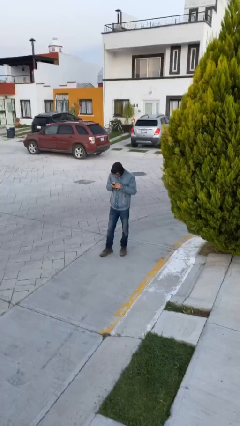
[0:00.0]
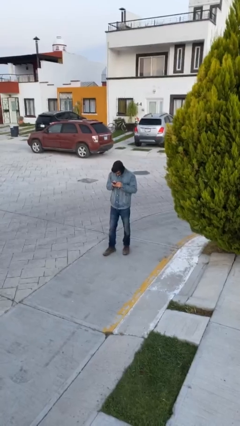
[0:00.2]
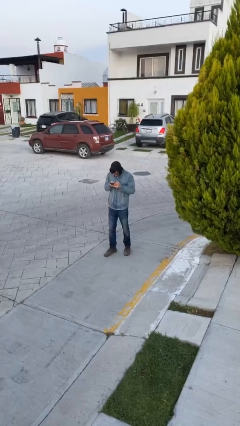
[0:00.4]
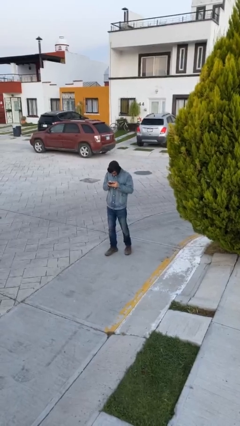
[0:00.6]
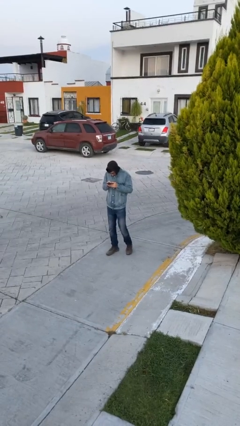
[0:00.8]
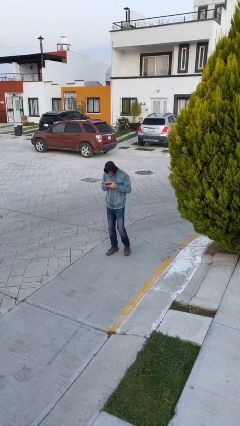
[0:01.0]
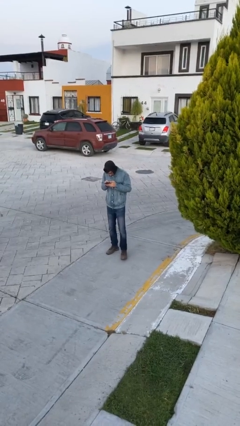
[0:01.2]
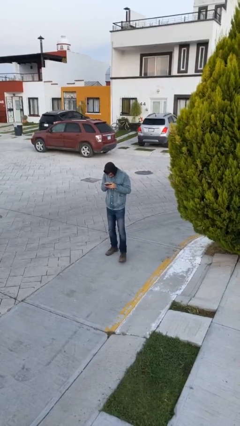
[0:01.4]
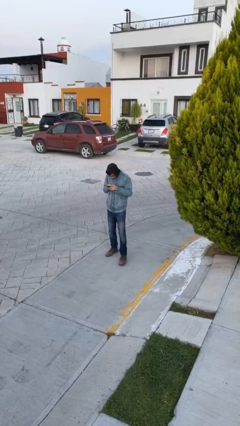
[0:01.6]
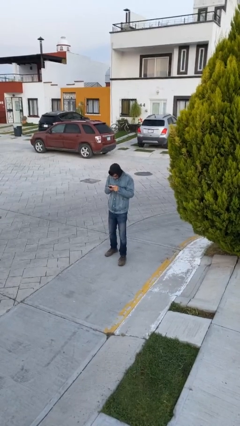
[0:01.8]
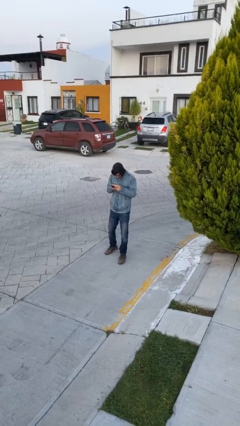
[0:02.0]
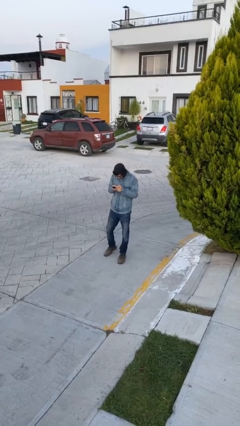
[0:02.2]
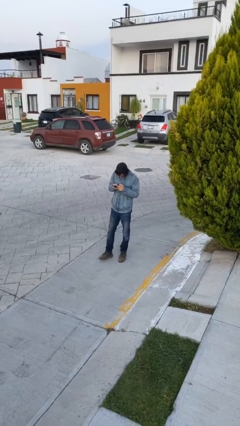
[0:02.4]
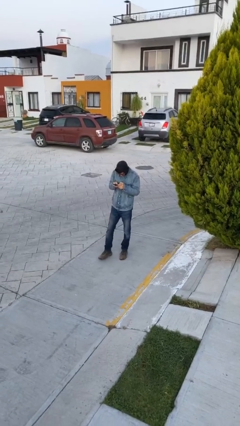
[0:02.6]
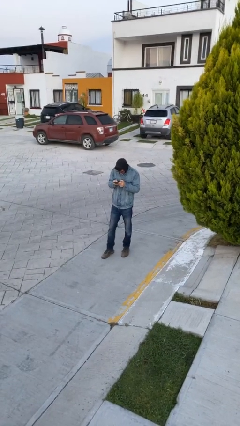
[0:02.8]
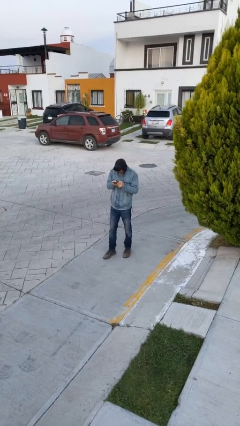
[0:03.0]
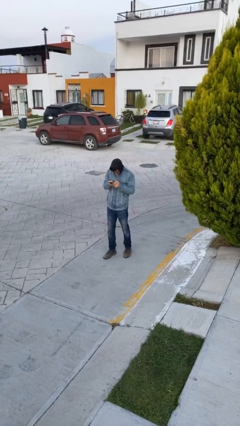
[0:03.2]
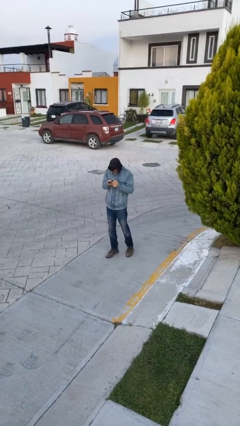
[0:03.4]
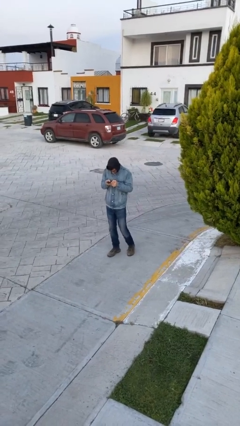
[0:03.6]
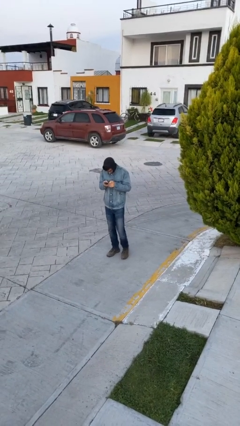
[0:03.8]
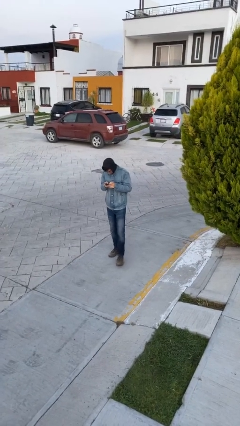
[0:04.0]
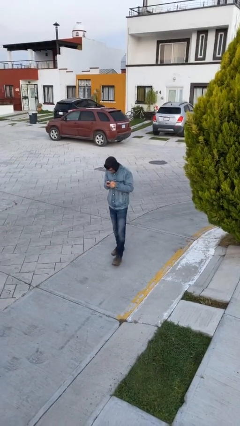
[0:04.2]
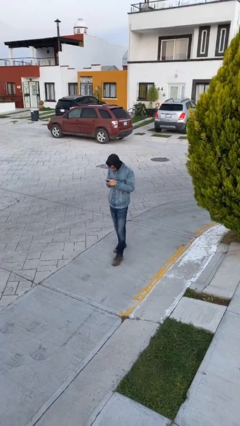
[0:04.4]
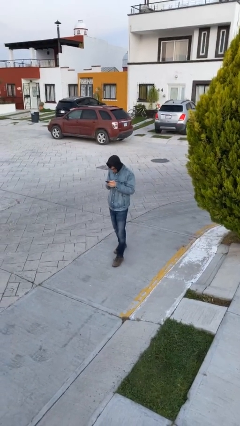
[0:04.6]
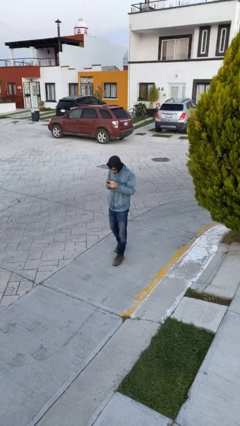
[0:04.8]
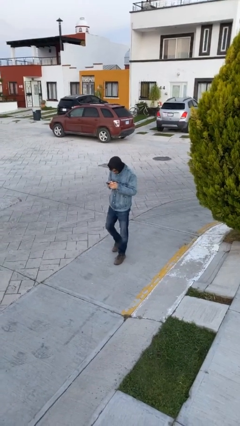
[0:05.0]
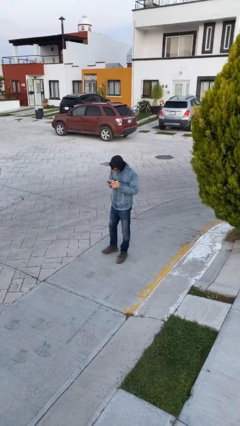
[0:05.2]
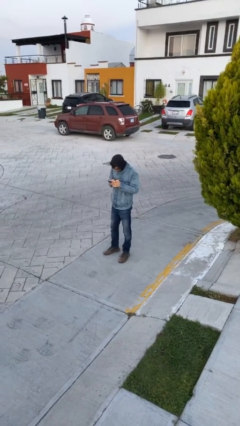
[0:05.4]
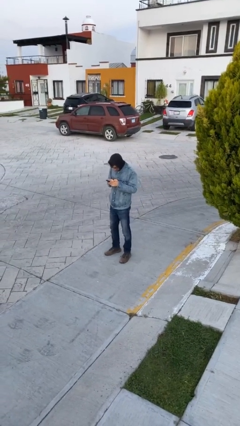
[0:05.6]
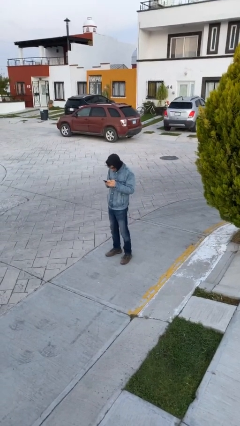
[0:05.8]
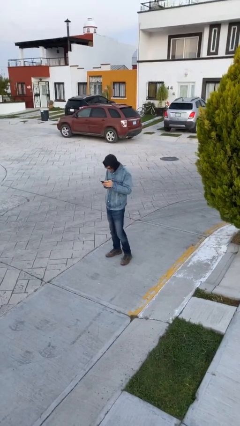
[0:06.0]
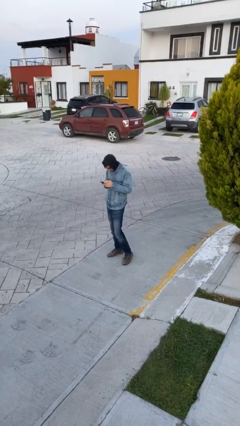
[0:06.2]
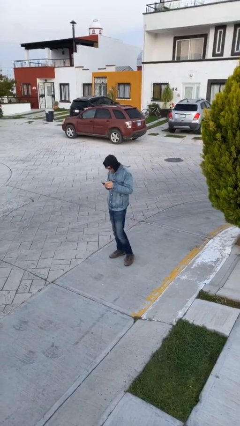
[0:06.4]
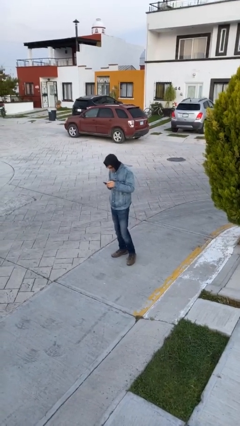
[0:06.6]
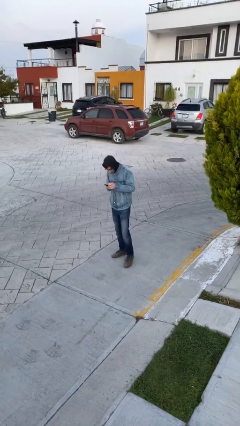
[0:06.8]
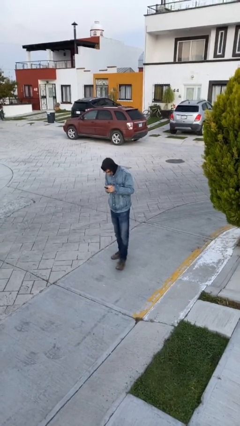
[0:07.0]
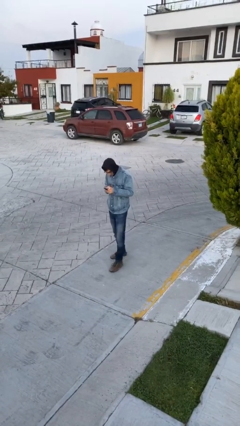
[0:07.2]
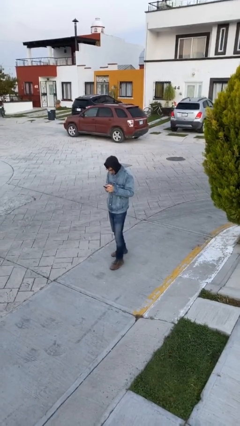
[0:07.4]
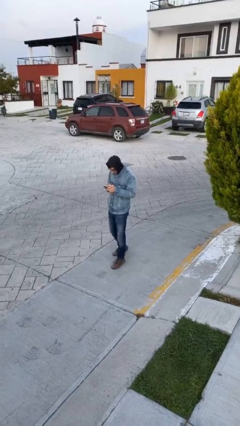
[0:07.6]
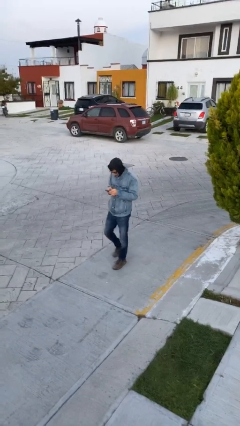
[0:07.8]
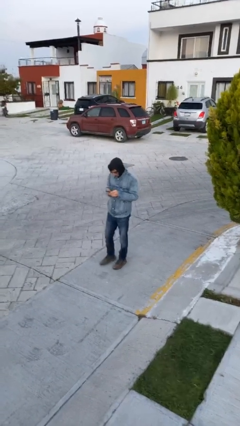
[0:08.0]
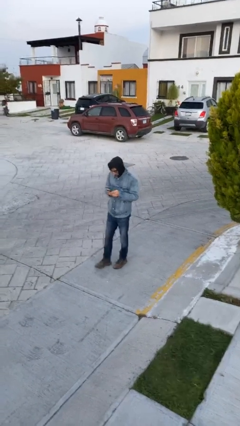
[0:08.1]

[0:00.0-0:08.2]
person texts on phone

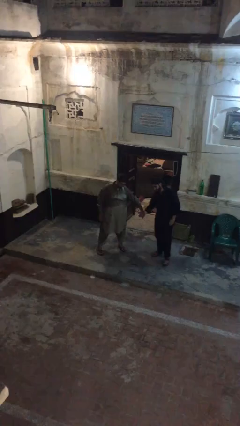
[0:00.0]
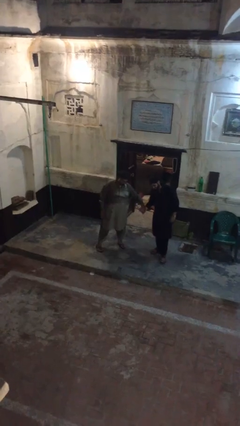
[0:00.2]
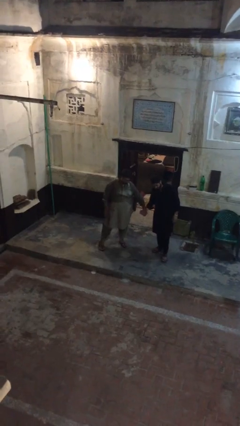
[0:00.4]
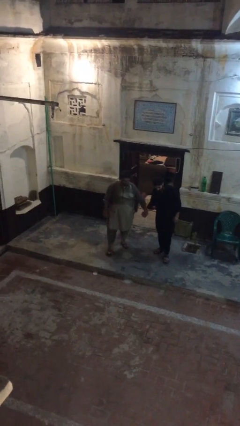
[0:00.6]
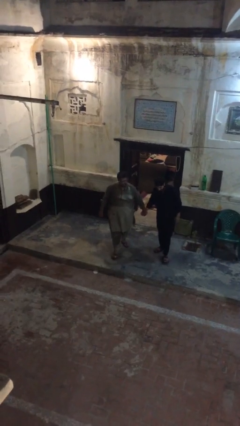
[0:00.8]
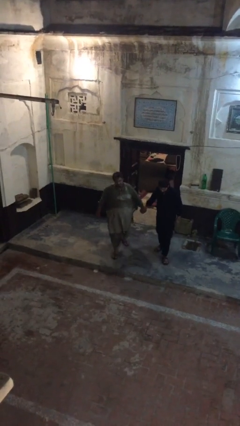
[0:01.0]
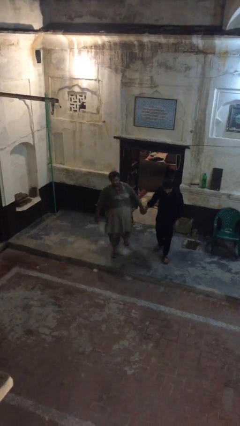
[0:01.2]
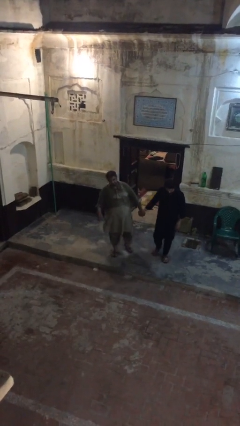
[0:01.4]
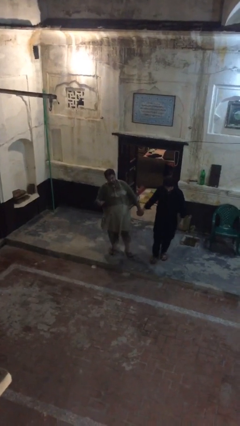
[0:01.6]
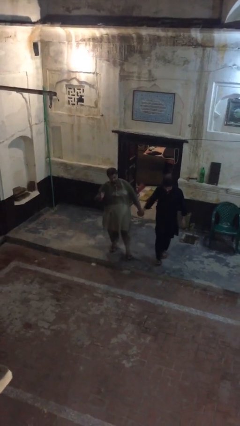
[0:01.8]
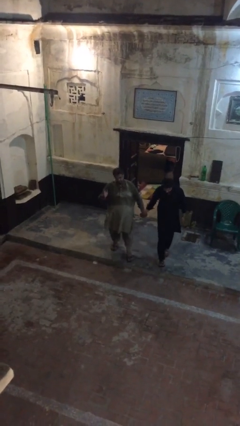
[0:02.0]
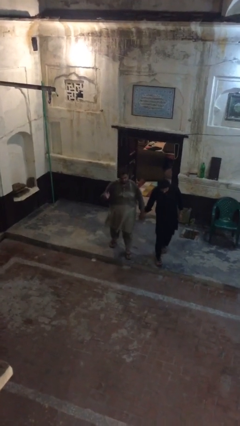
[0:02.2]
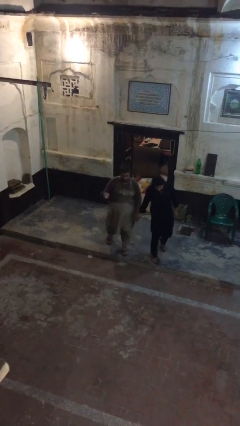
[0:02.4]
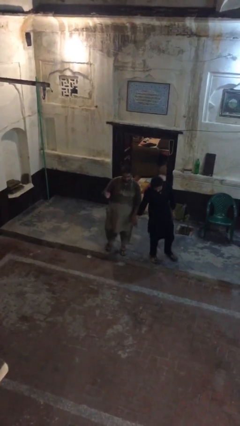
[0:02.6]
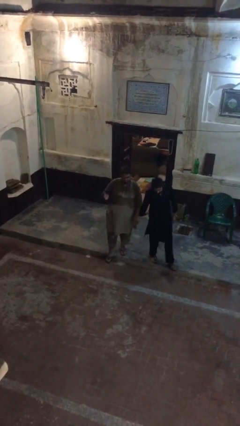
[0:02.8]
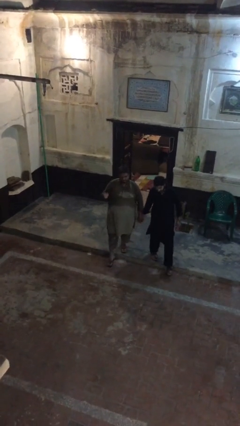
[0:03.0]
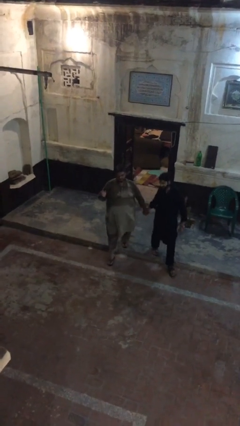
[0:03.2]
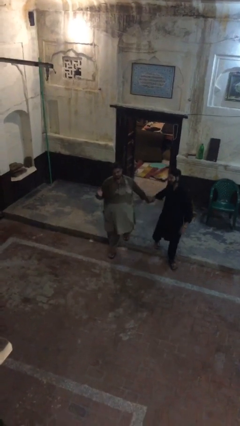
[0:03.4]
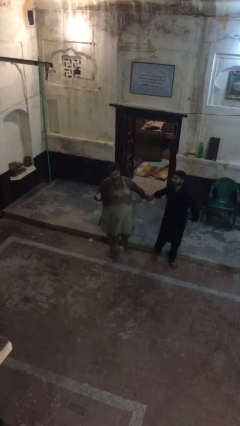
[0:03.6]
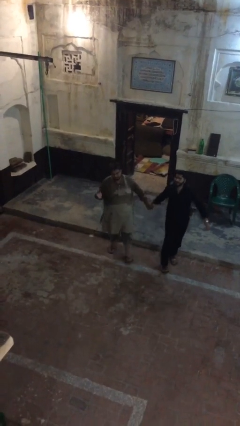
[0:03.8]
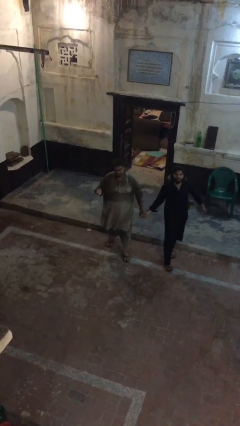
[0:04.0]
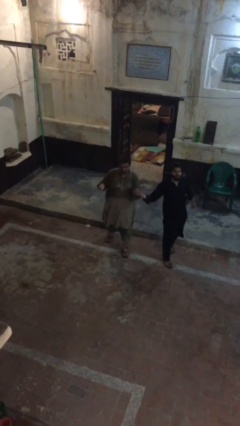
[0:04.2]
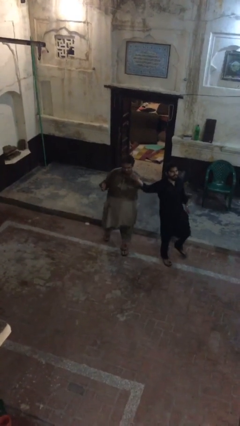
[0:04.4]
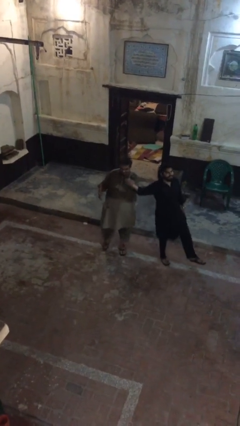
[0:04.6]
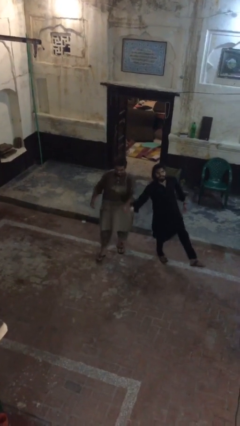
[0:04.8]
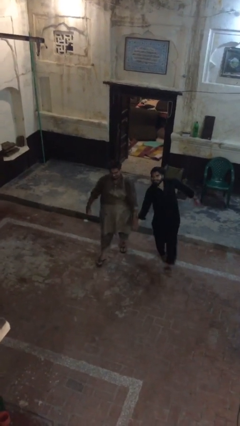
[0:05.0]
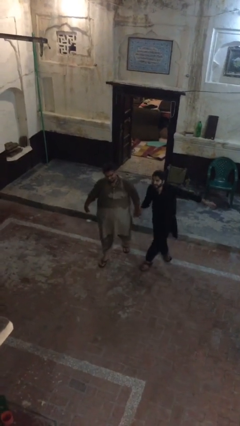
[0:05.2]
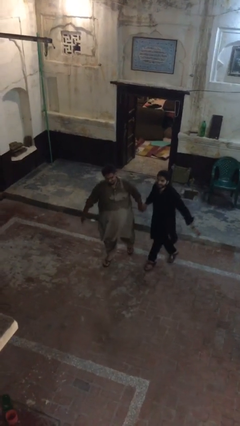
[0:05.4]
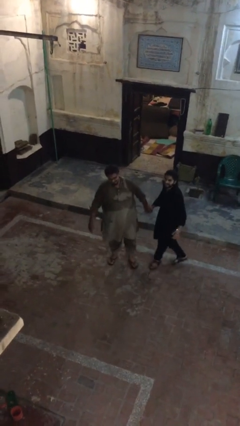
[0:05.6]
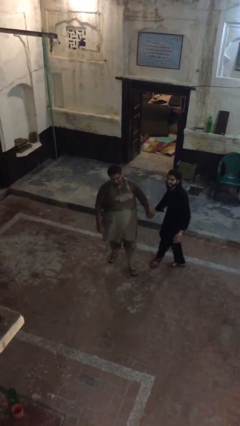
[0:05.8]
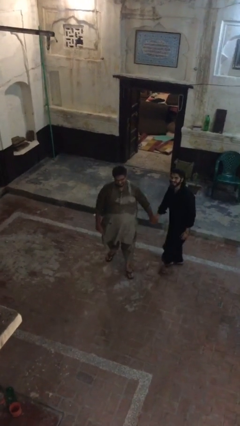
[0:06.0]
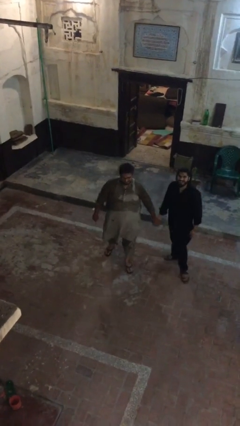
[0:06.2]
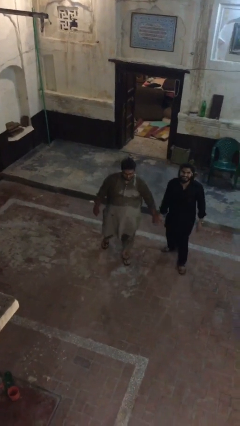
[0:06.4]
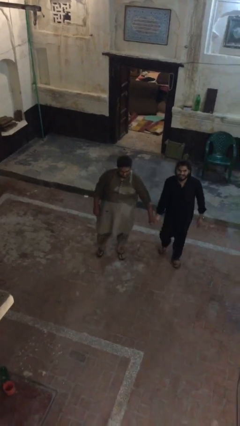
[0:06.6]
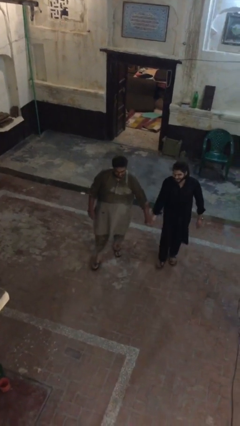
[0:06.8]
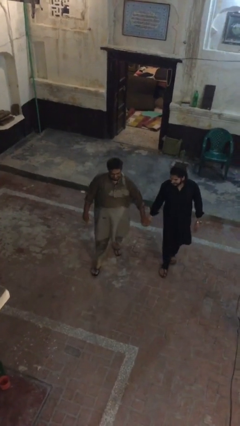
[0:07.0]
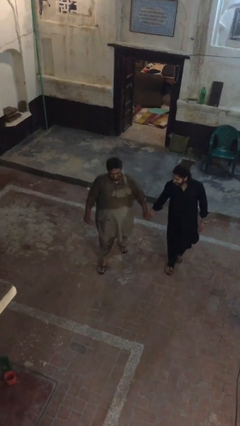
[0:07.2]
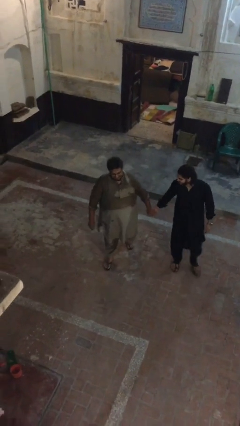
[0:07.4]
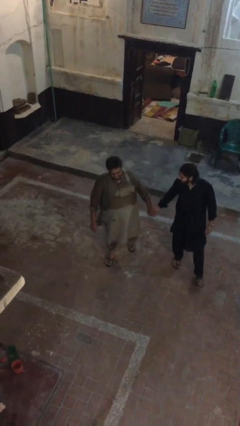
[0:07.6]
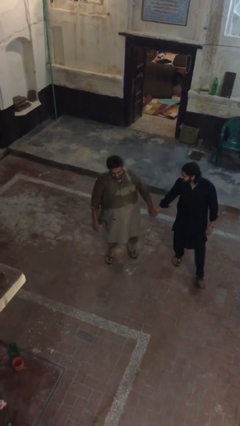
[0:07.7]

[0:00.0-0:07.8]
person holds hand

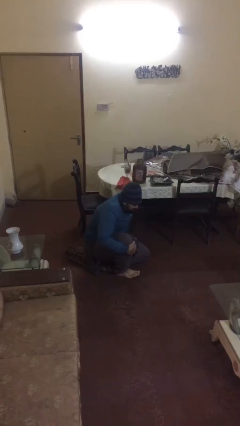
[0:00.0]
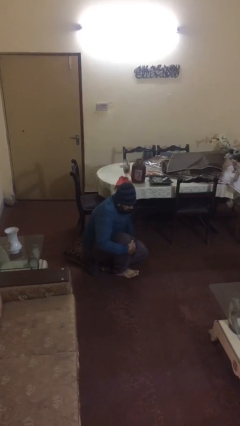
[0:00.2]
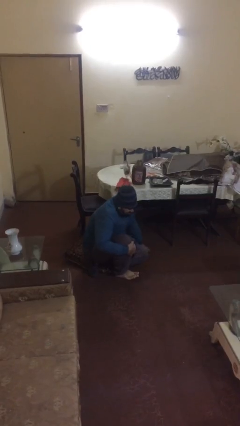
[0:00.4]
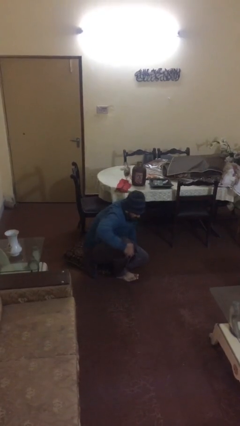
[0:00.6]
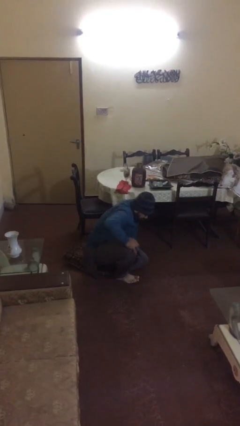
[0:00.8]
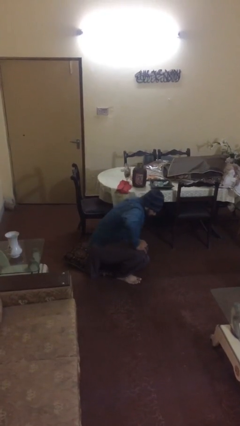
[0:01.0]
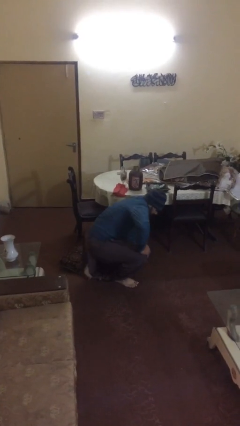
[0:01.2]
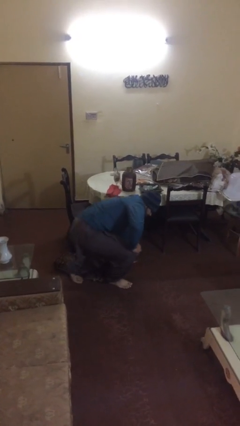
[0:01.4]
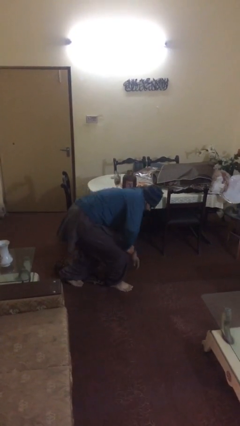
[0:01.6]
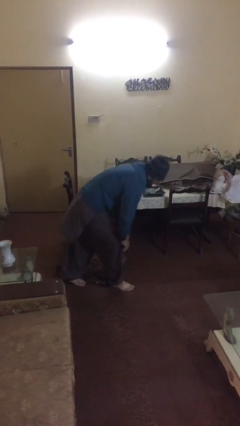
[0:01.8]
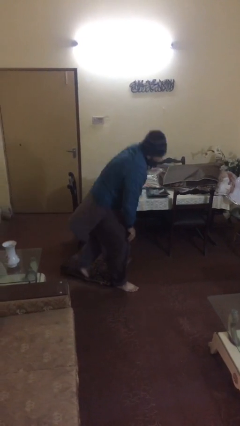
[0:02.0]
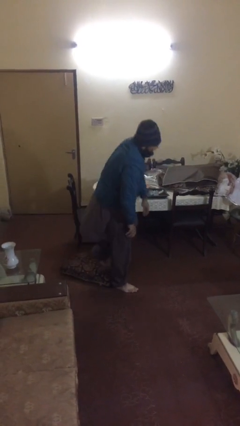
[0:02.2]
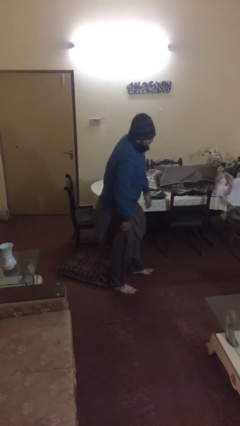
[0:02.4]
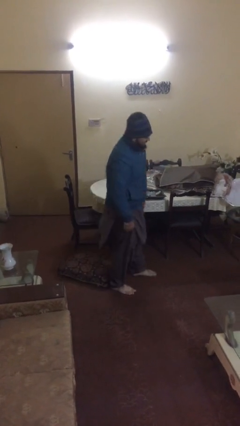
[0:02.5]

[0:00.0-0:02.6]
person stands up
